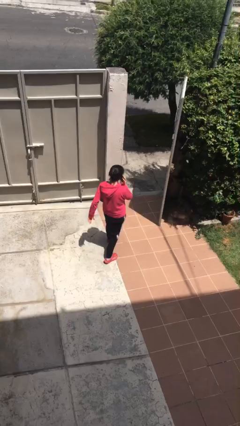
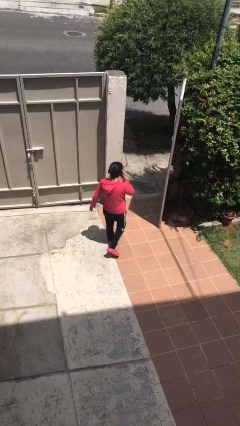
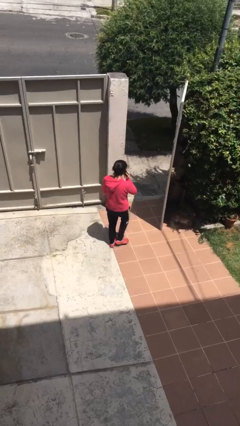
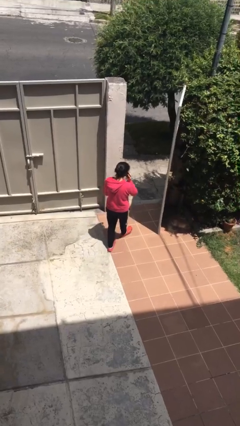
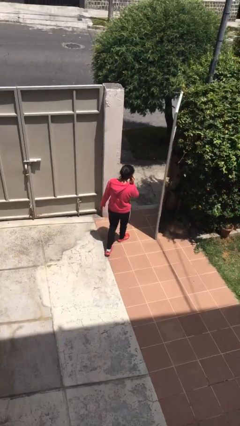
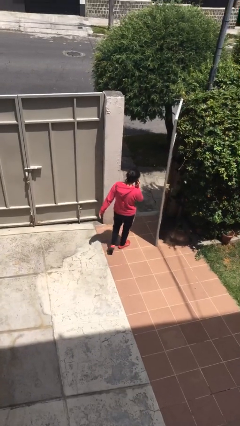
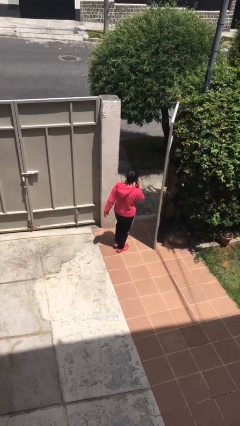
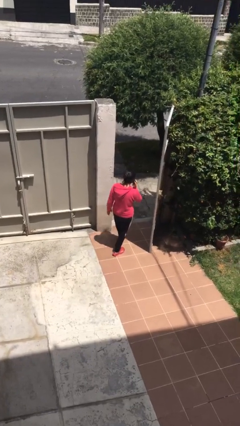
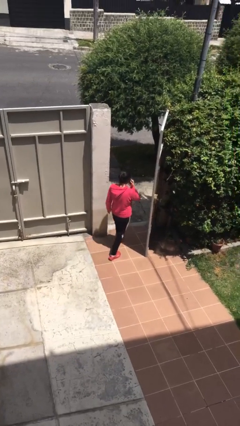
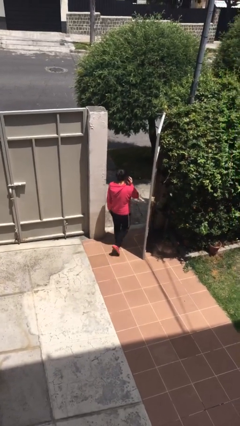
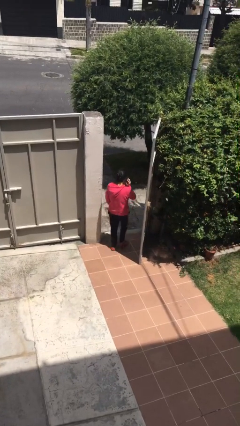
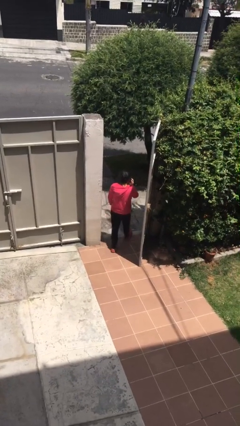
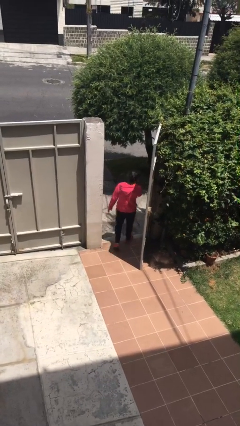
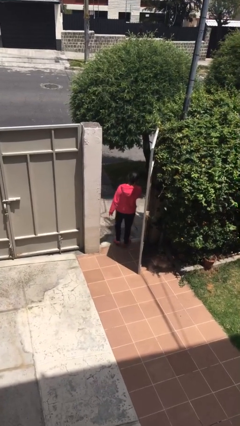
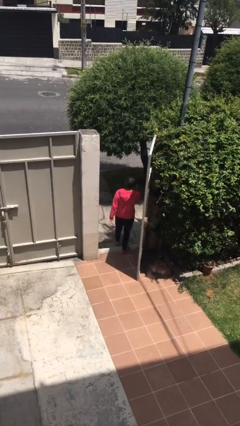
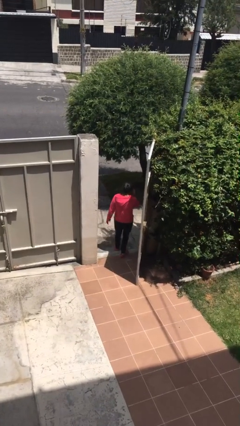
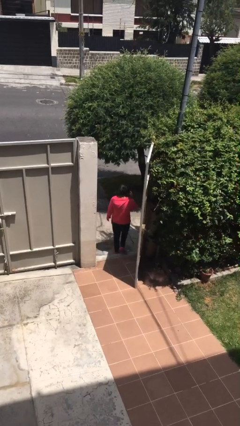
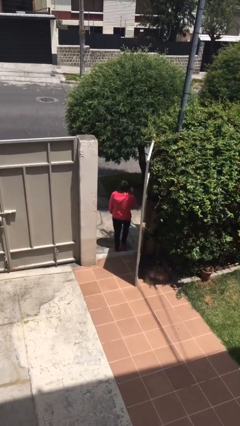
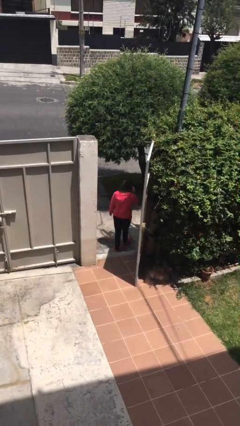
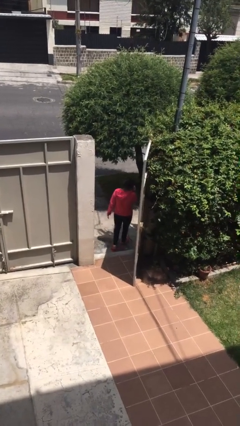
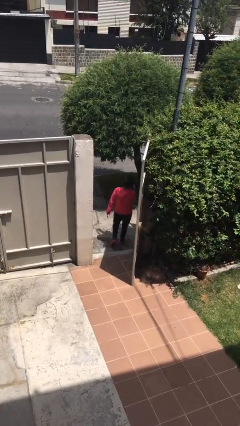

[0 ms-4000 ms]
person exits scene through structure

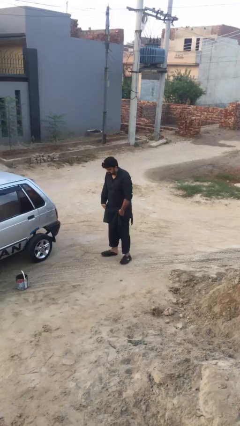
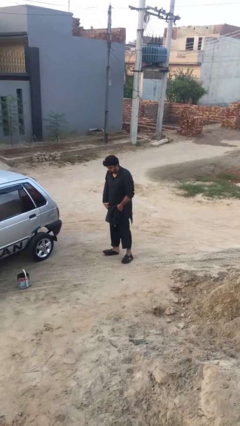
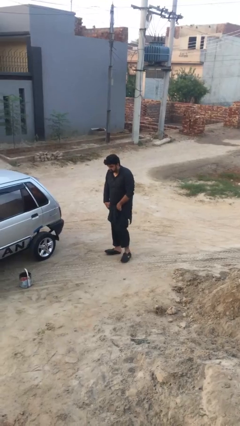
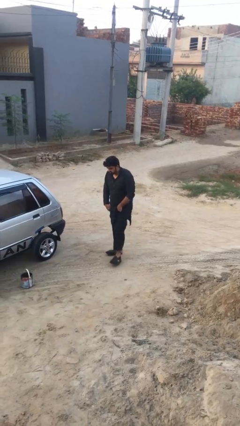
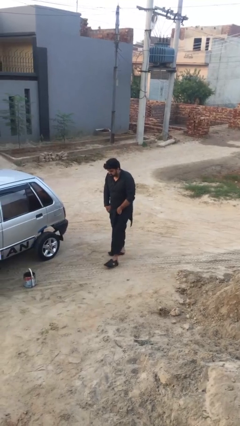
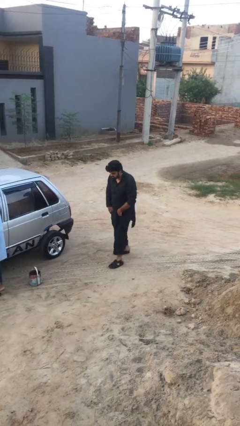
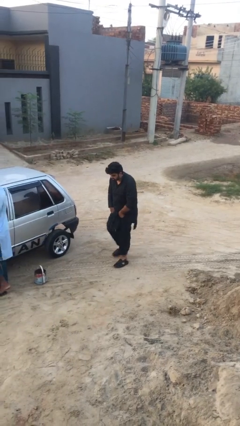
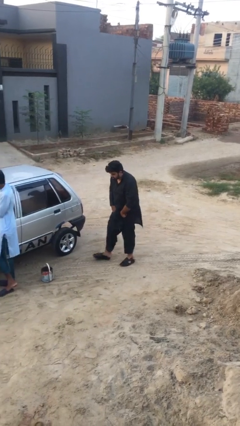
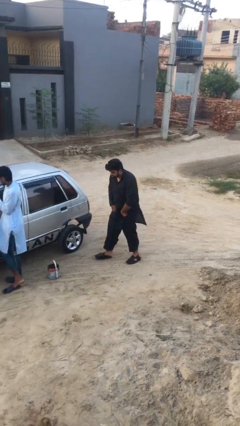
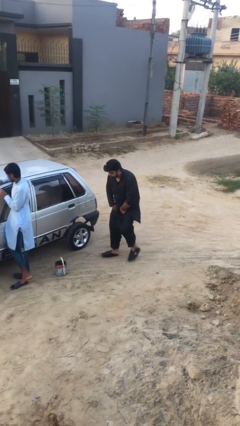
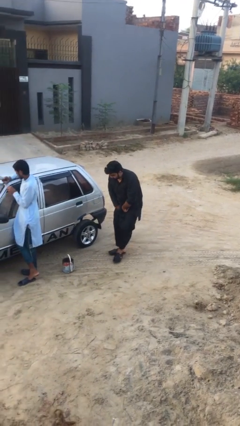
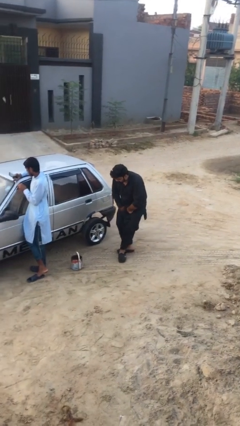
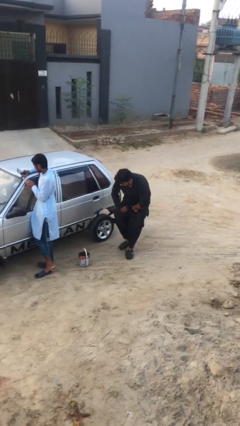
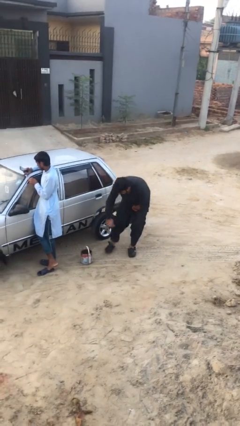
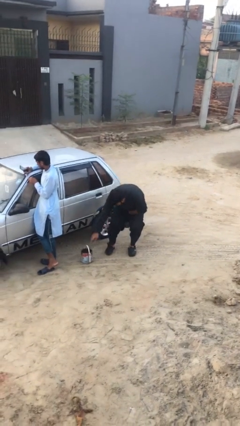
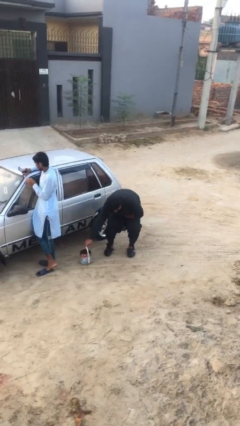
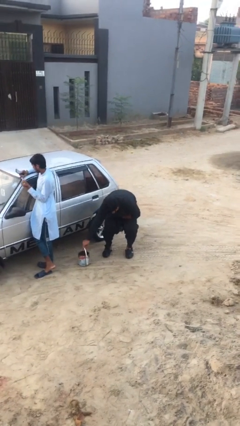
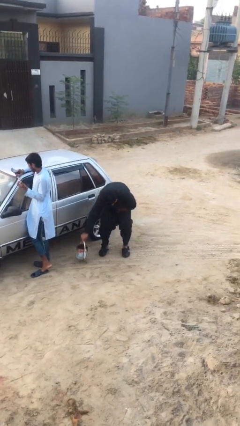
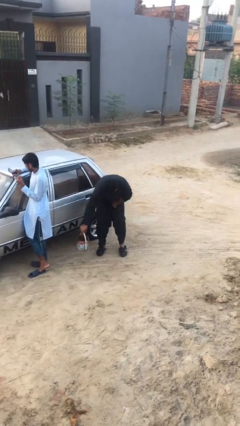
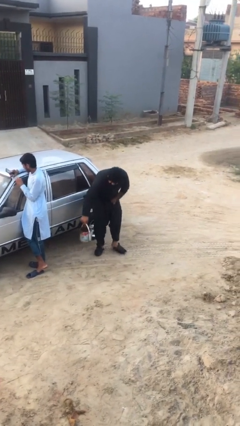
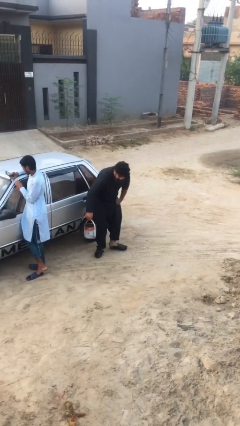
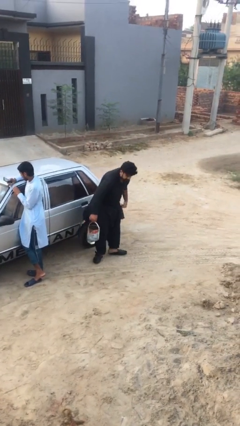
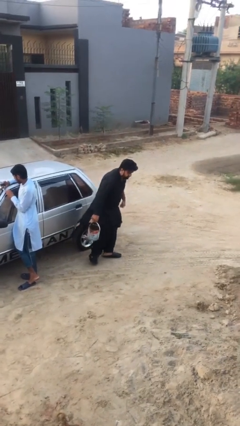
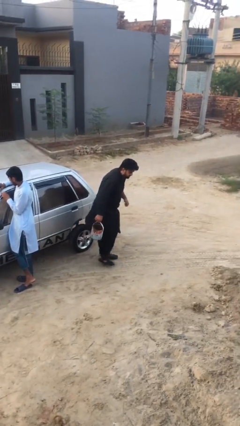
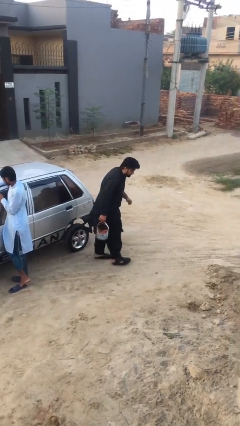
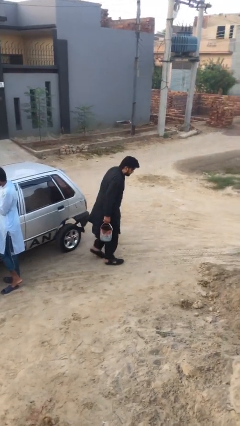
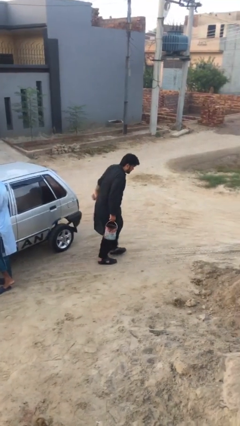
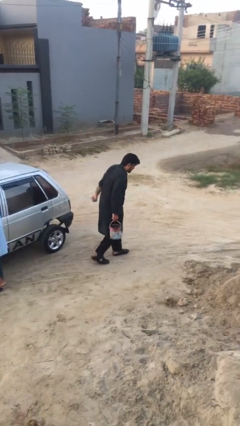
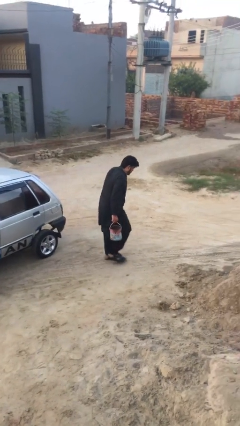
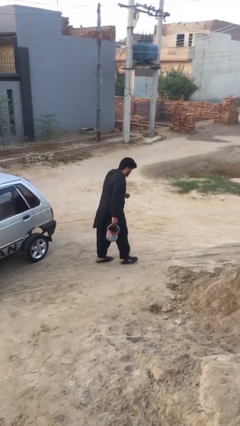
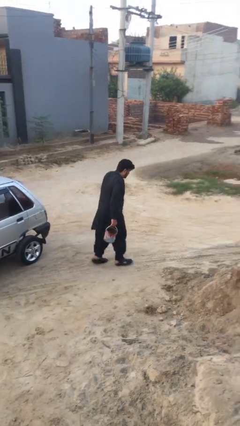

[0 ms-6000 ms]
person steals object from person

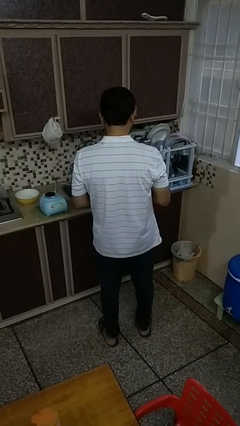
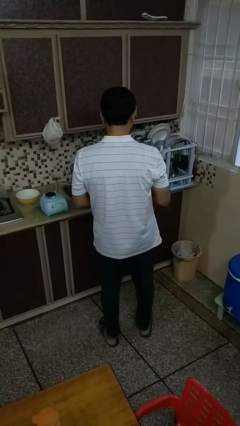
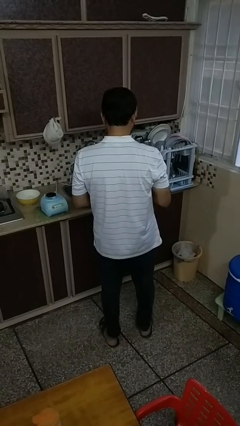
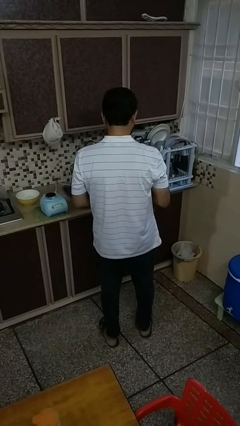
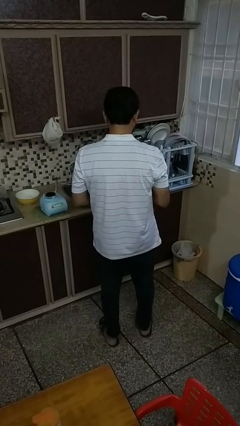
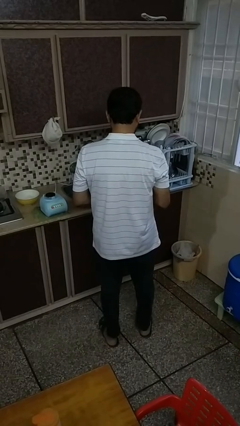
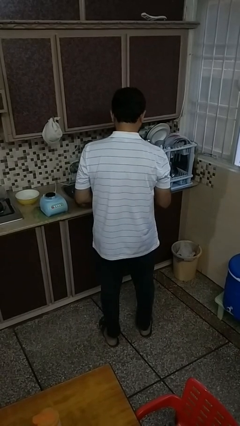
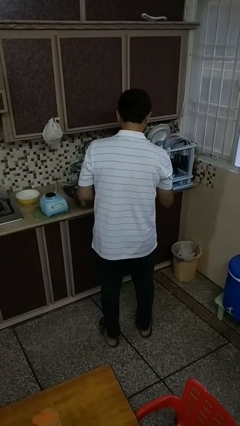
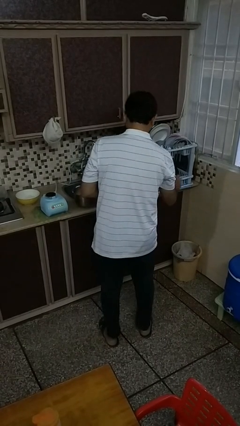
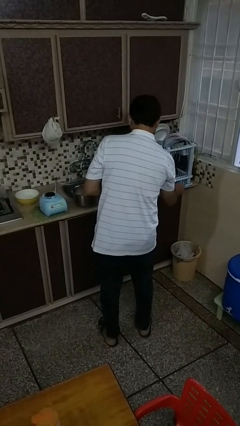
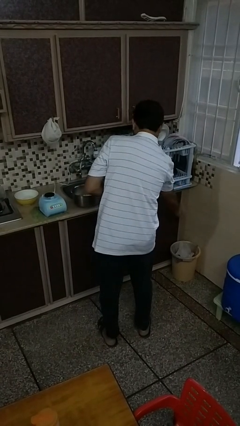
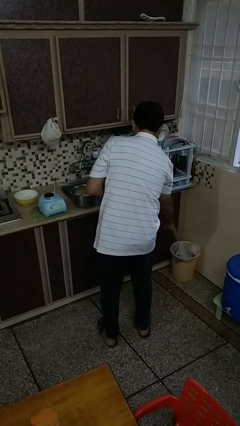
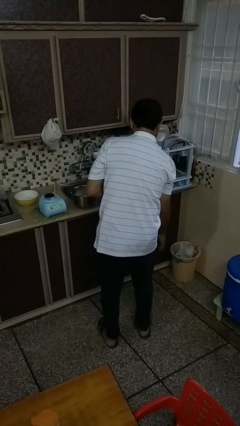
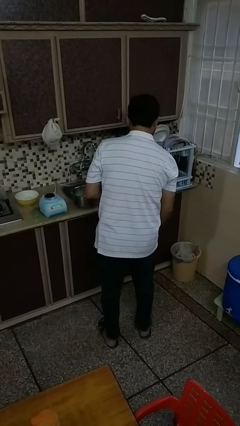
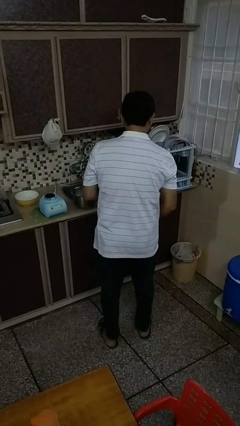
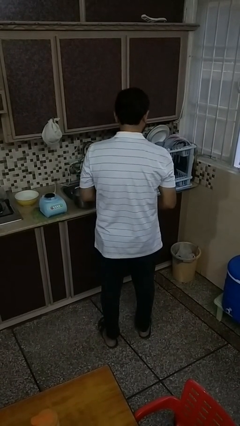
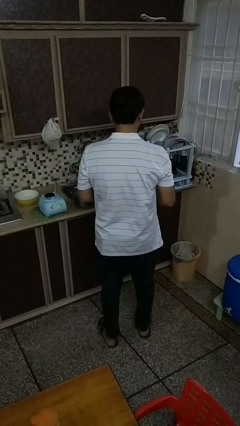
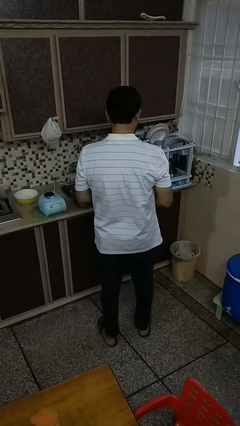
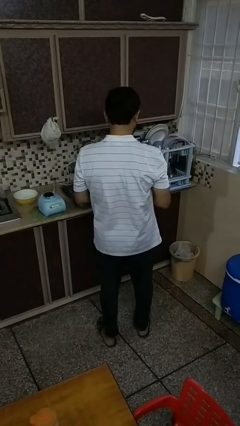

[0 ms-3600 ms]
person discards trash

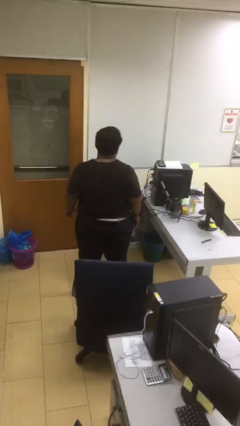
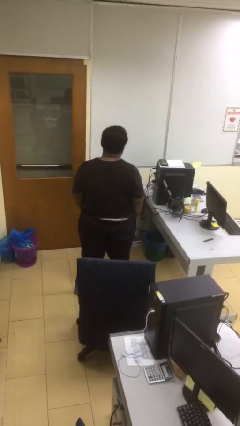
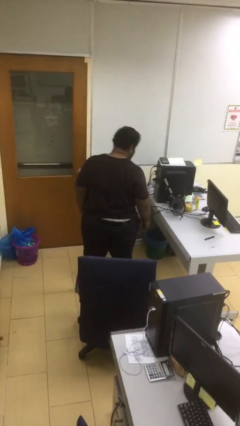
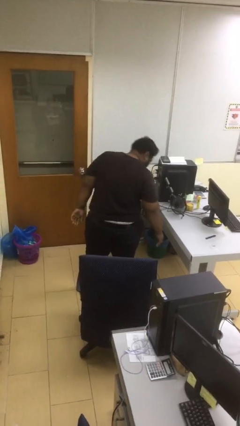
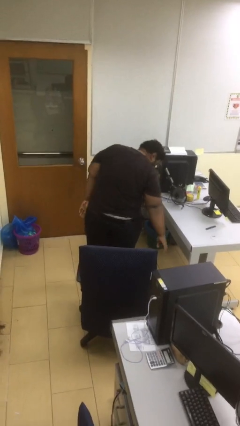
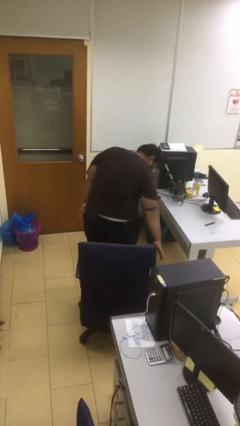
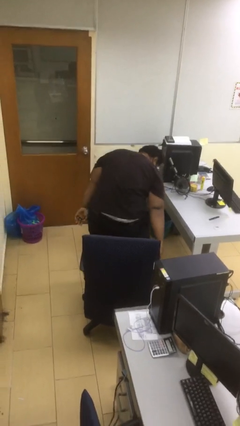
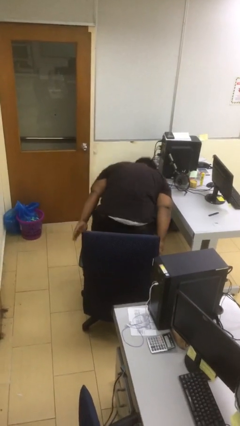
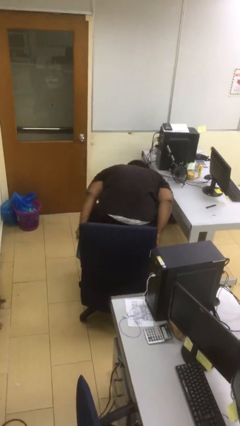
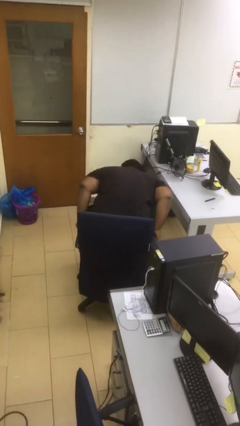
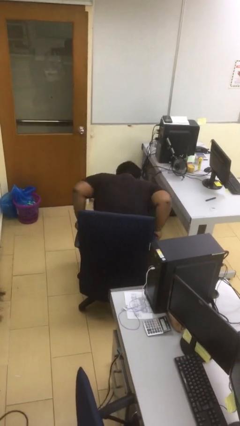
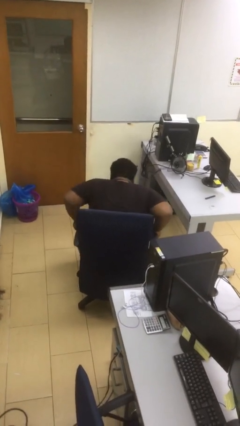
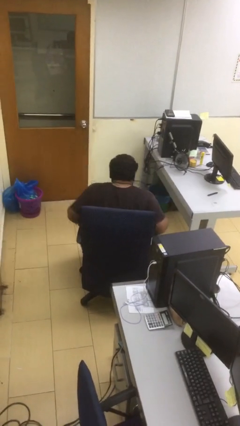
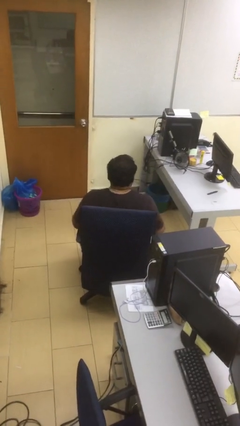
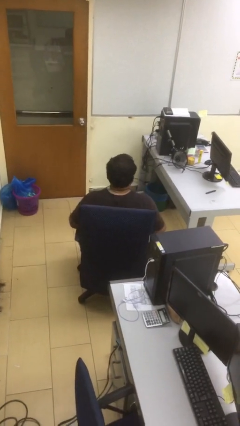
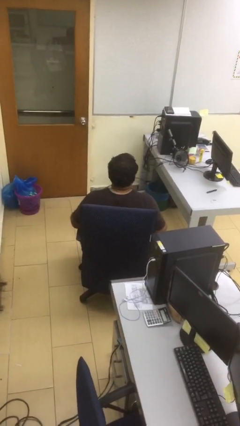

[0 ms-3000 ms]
person sits down

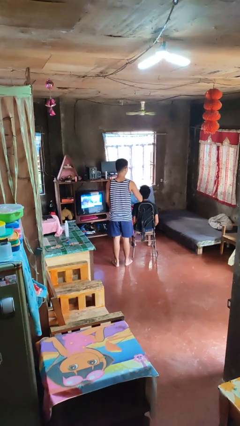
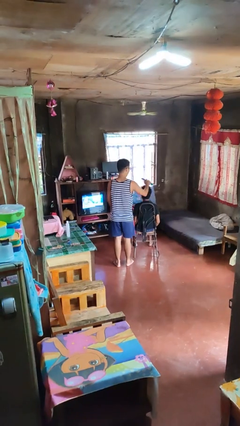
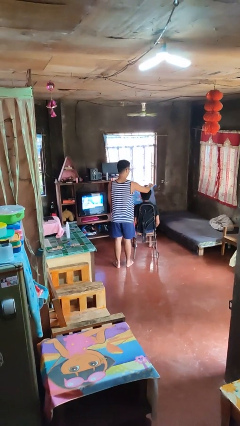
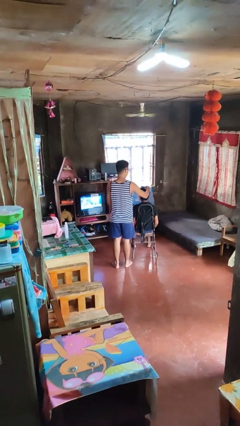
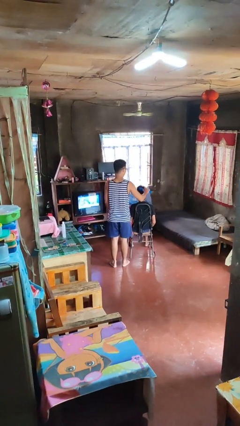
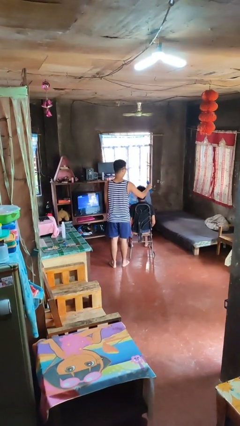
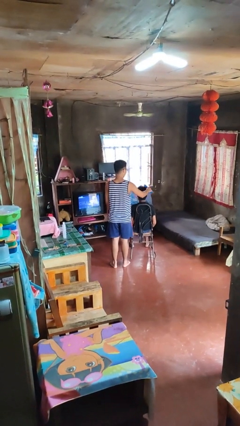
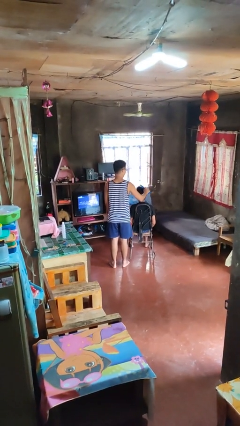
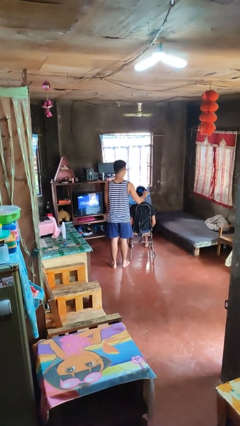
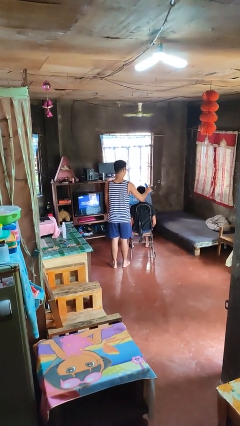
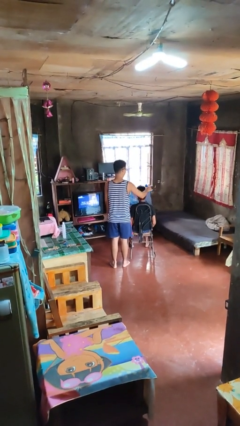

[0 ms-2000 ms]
person brushes hair of person
